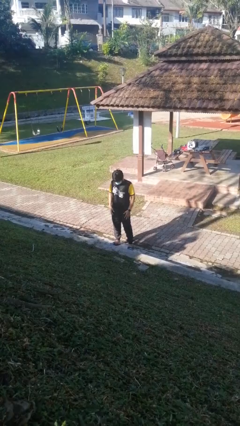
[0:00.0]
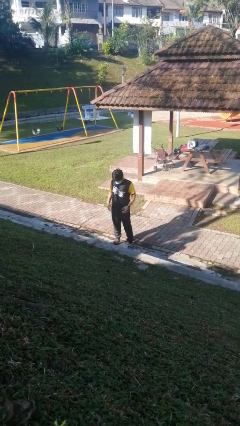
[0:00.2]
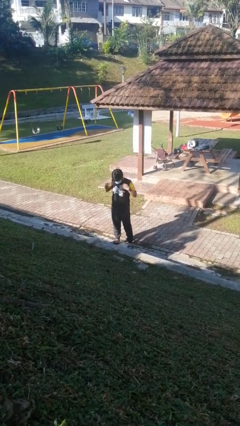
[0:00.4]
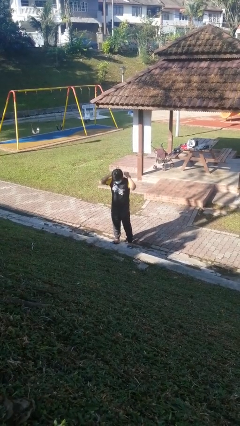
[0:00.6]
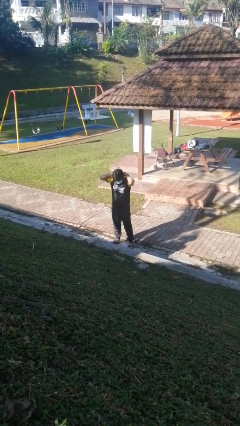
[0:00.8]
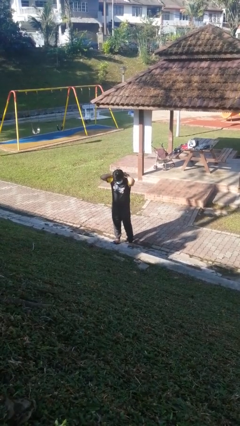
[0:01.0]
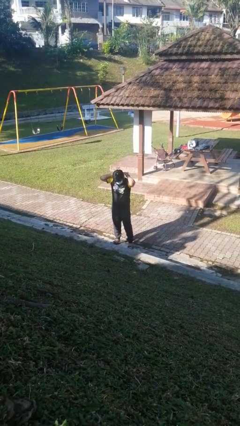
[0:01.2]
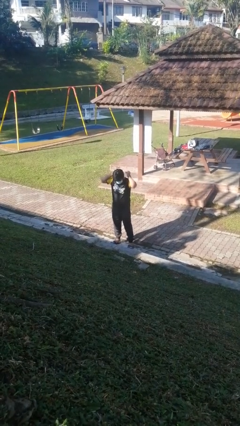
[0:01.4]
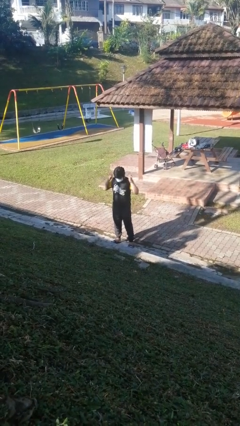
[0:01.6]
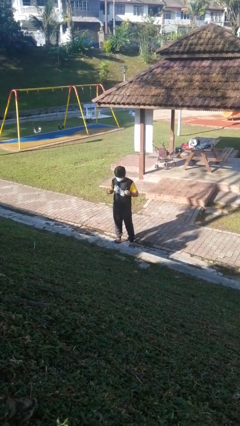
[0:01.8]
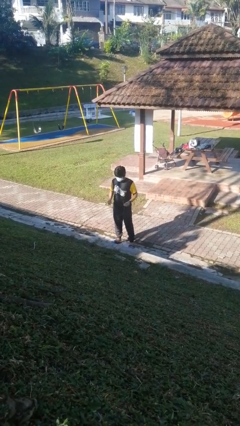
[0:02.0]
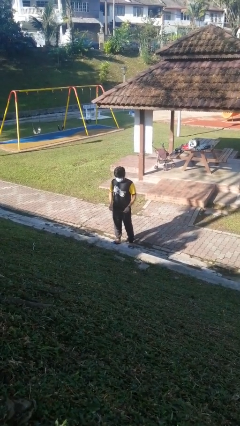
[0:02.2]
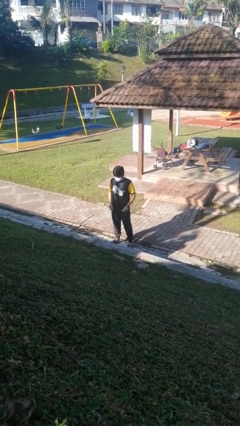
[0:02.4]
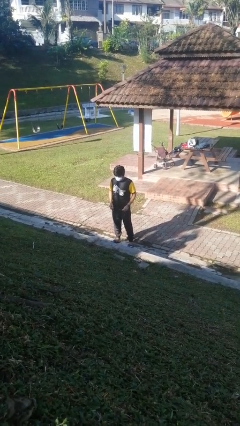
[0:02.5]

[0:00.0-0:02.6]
person takes off necklace

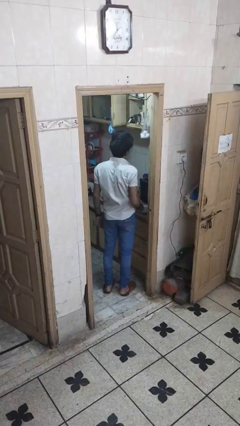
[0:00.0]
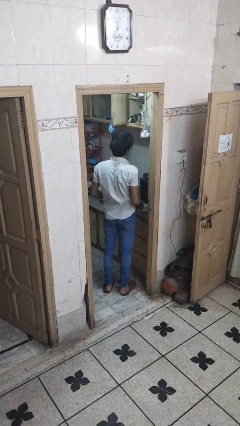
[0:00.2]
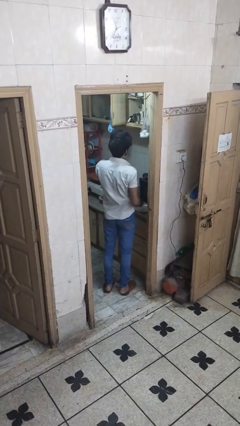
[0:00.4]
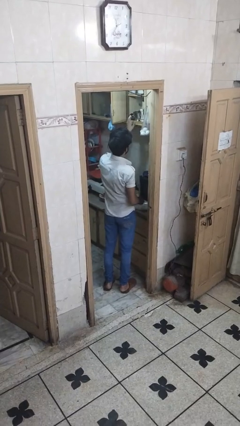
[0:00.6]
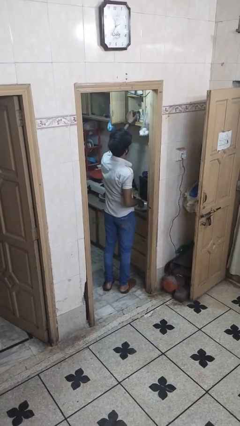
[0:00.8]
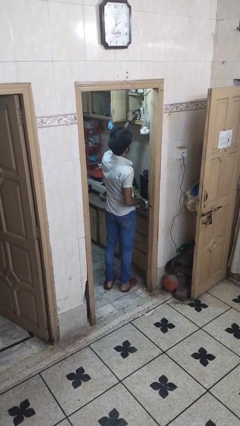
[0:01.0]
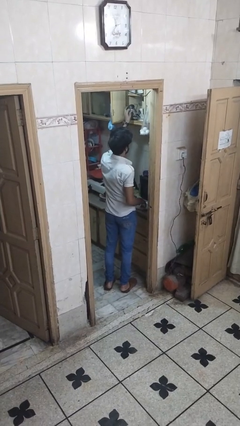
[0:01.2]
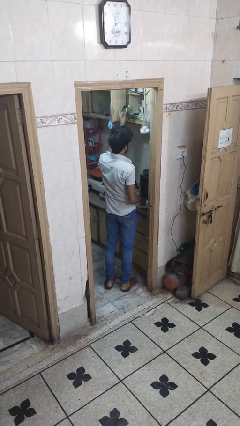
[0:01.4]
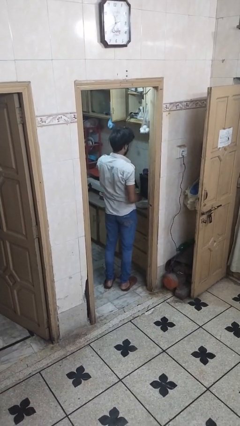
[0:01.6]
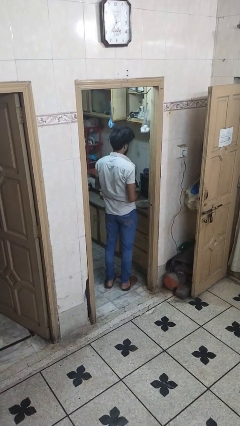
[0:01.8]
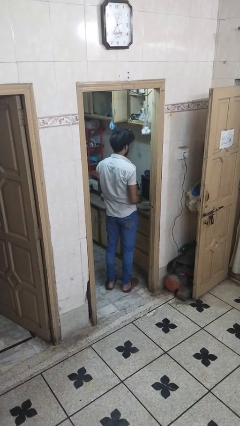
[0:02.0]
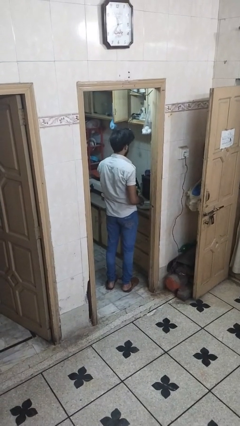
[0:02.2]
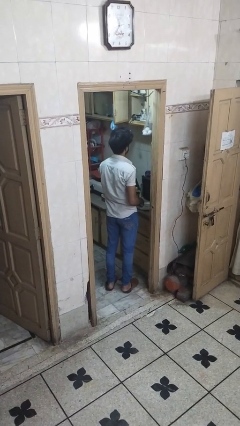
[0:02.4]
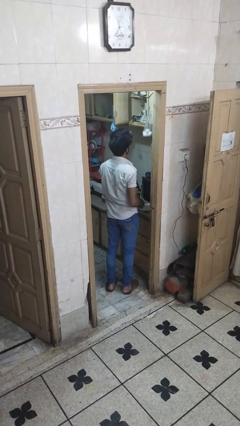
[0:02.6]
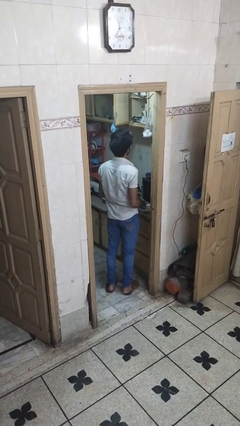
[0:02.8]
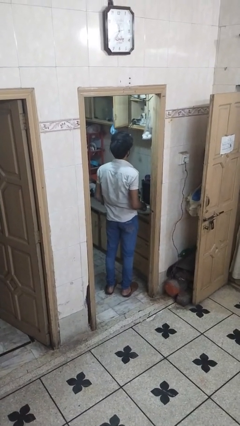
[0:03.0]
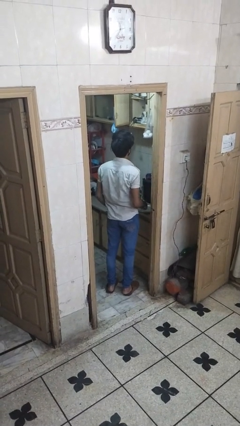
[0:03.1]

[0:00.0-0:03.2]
person takes object from cabinet

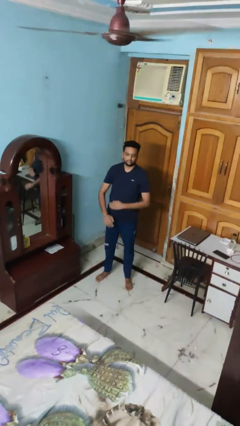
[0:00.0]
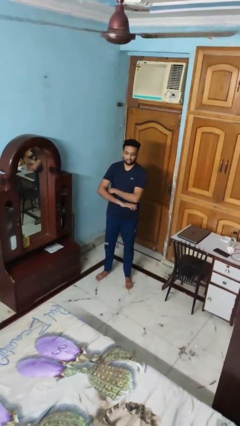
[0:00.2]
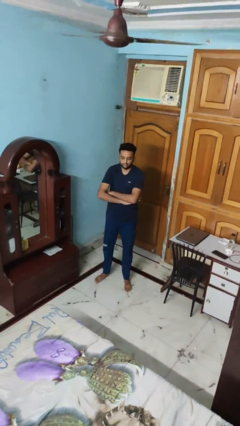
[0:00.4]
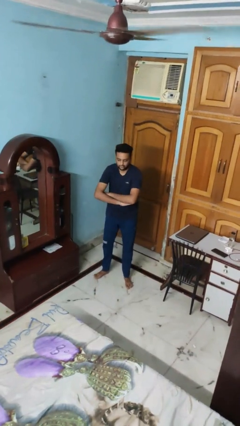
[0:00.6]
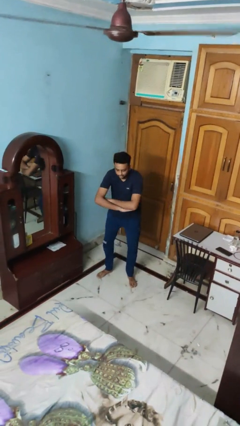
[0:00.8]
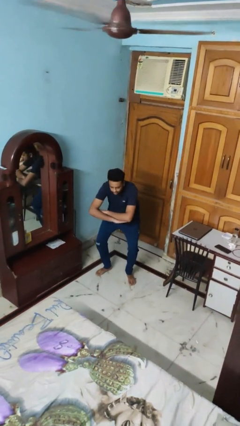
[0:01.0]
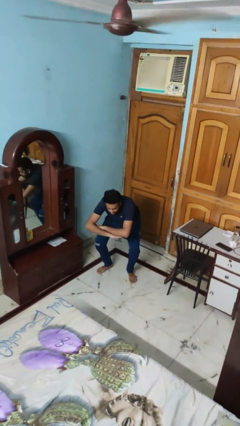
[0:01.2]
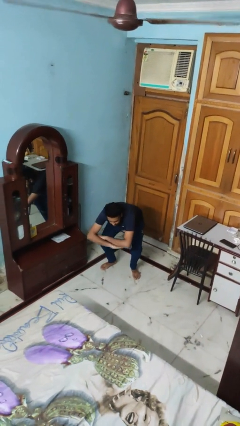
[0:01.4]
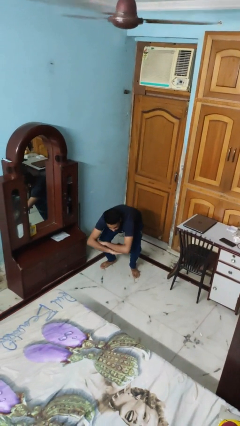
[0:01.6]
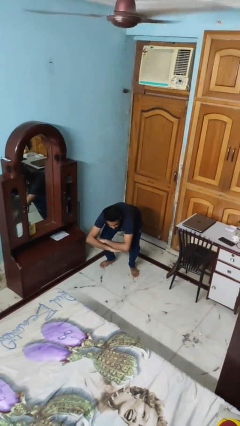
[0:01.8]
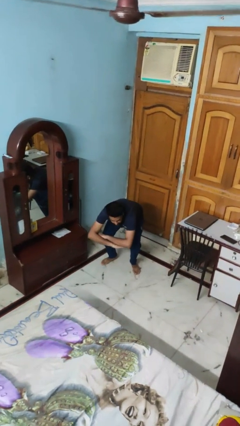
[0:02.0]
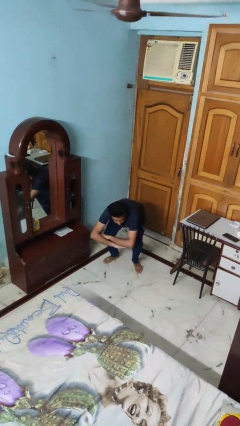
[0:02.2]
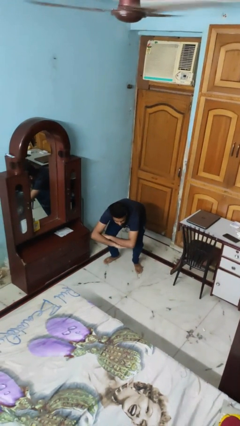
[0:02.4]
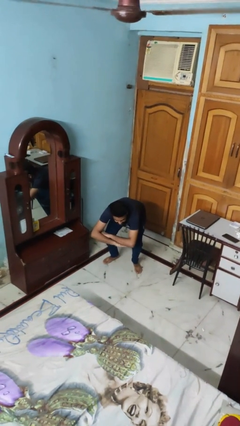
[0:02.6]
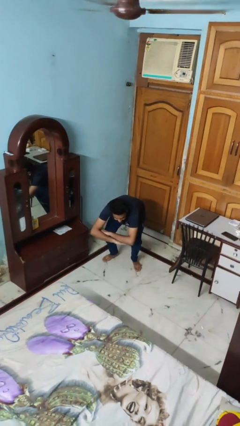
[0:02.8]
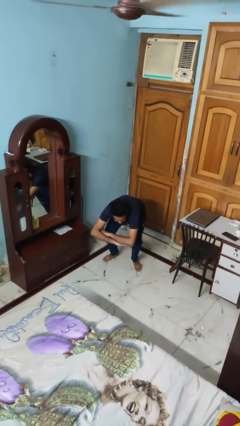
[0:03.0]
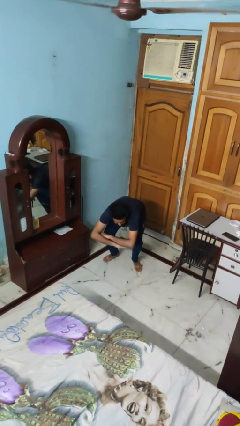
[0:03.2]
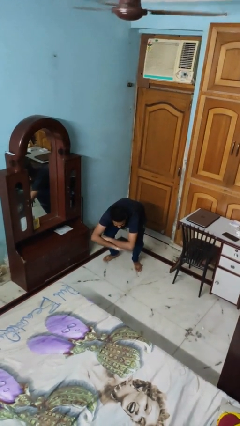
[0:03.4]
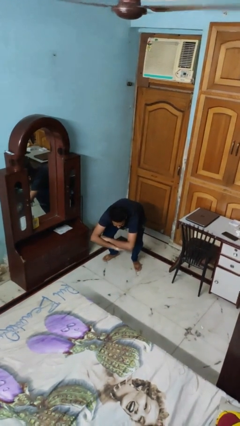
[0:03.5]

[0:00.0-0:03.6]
person squats

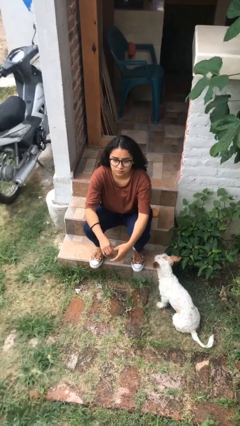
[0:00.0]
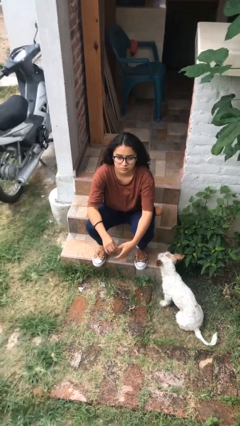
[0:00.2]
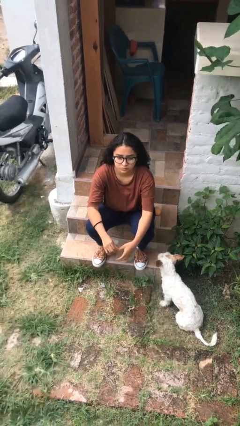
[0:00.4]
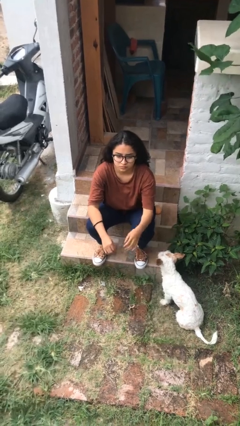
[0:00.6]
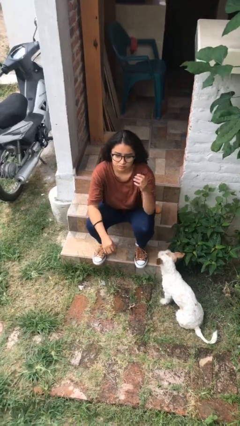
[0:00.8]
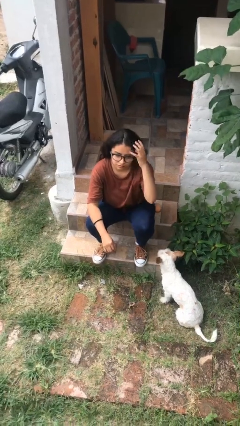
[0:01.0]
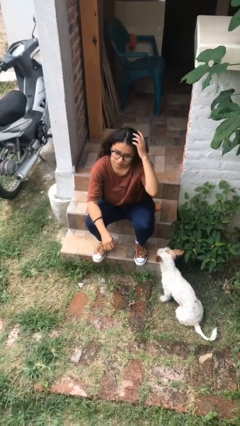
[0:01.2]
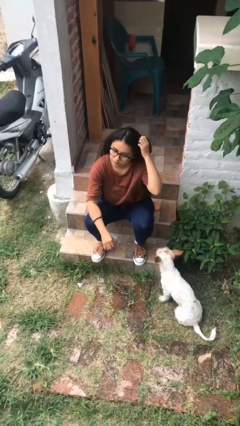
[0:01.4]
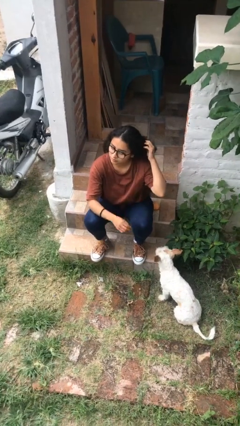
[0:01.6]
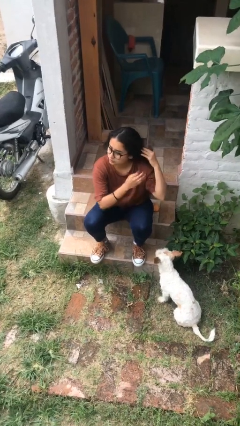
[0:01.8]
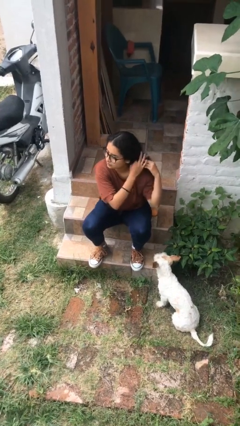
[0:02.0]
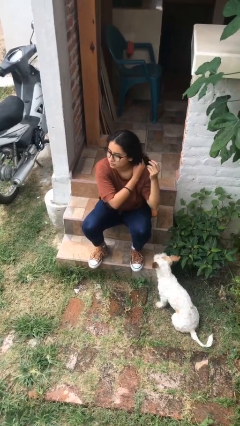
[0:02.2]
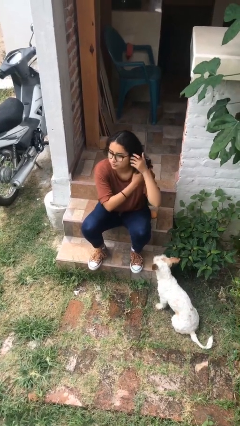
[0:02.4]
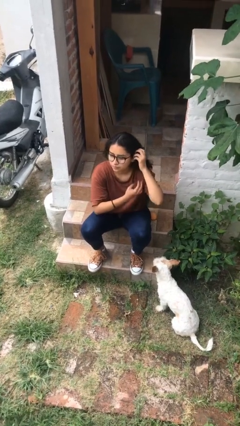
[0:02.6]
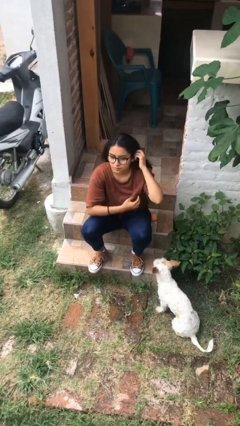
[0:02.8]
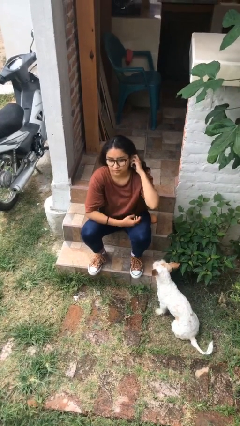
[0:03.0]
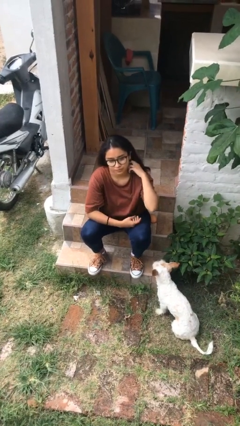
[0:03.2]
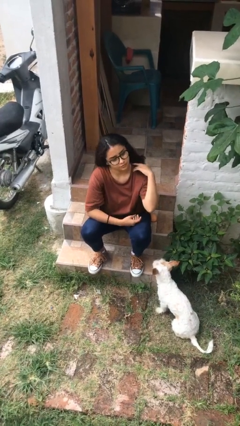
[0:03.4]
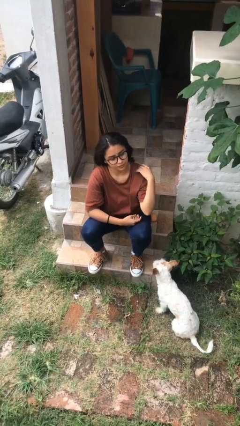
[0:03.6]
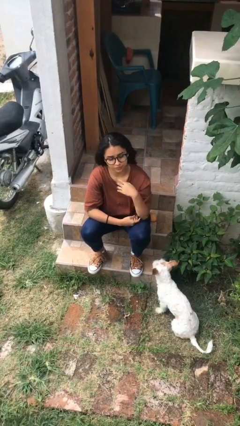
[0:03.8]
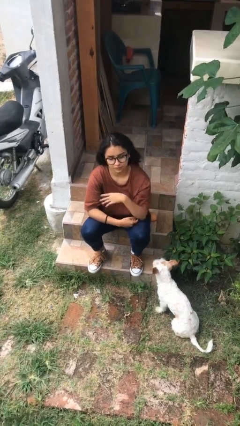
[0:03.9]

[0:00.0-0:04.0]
person strokes hair

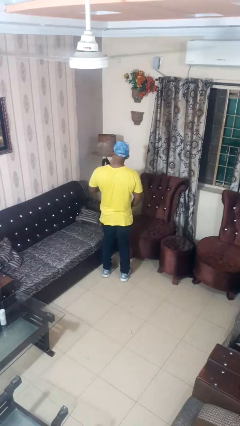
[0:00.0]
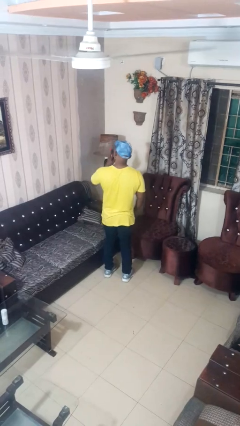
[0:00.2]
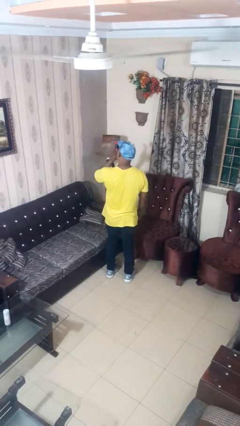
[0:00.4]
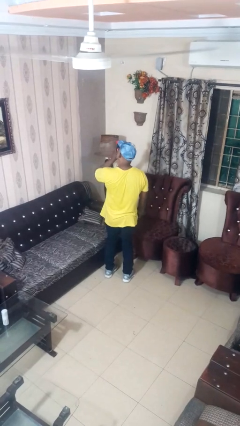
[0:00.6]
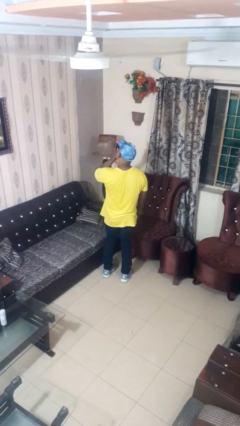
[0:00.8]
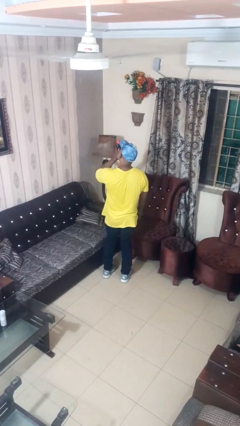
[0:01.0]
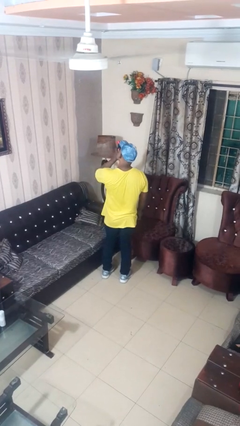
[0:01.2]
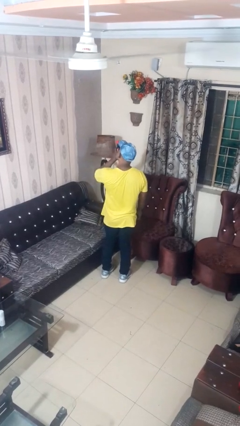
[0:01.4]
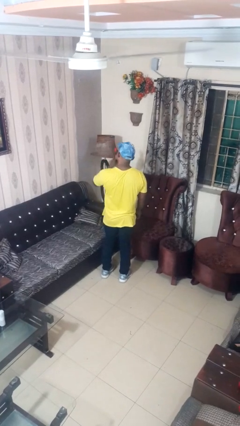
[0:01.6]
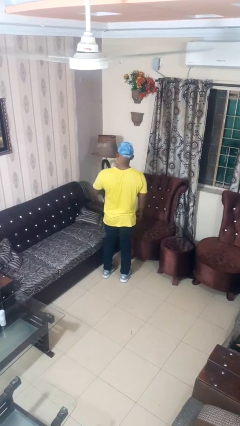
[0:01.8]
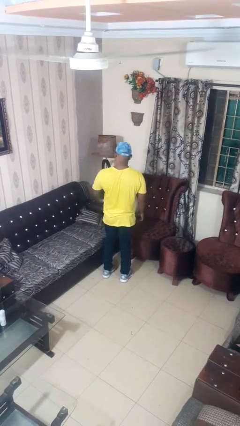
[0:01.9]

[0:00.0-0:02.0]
person vapes

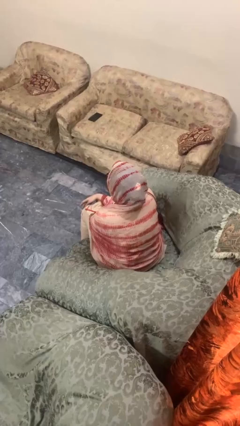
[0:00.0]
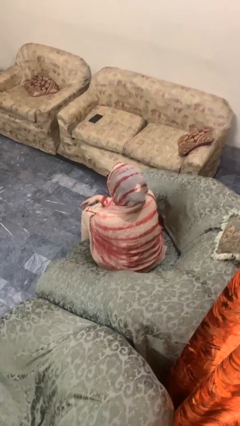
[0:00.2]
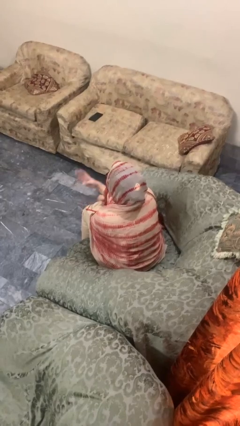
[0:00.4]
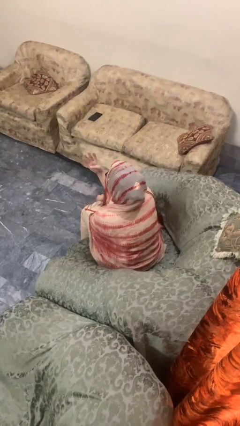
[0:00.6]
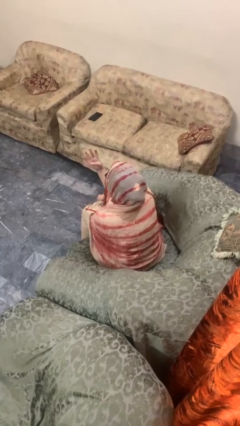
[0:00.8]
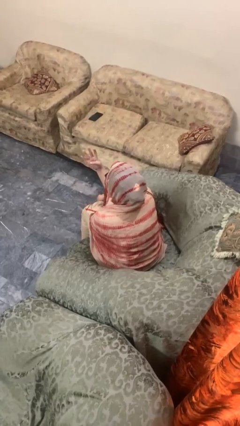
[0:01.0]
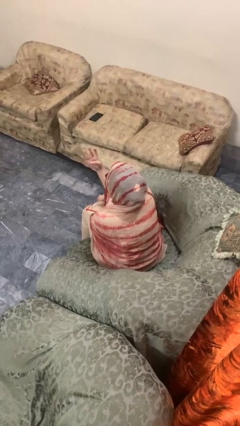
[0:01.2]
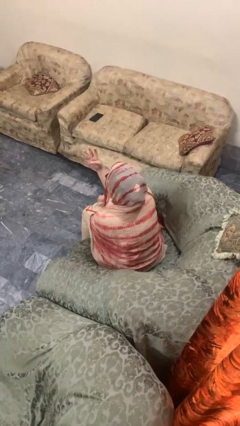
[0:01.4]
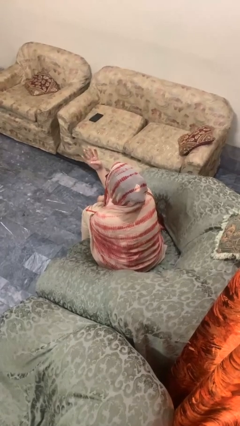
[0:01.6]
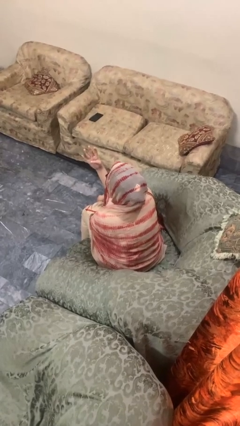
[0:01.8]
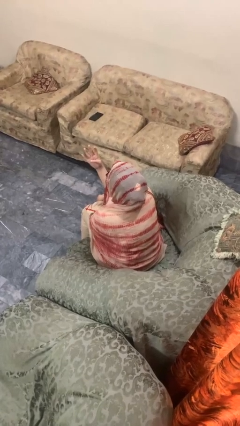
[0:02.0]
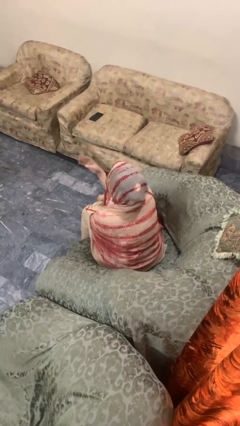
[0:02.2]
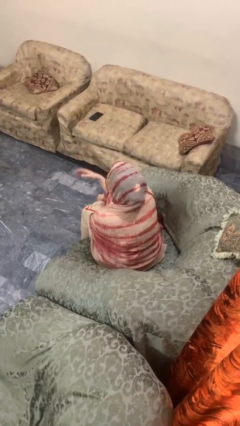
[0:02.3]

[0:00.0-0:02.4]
person gestures number four
